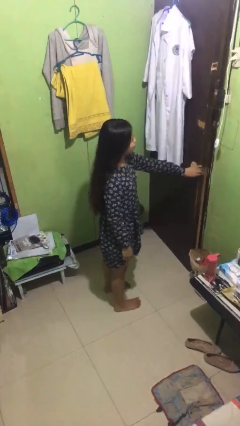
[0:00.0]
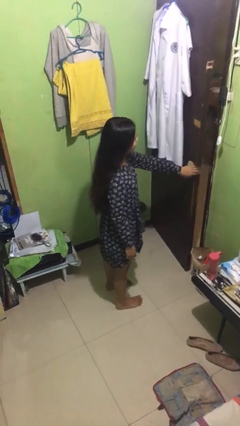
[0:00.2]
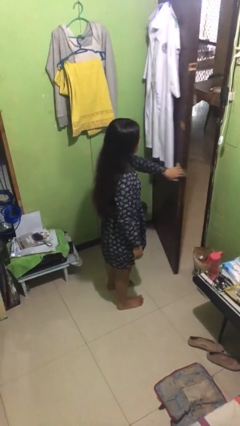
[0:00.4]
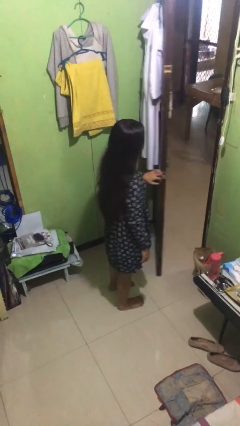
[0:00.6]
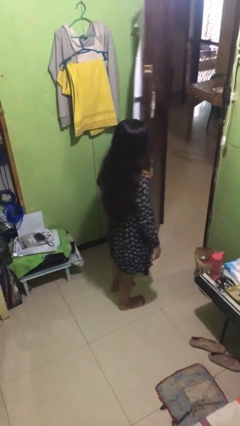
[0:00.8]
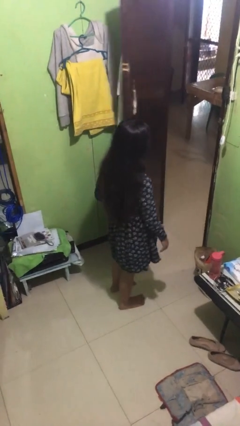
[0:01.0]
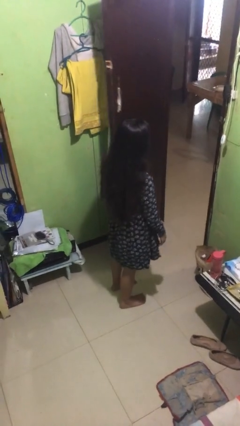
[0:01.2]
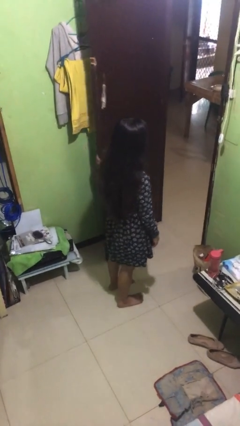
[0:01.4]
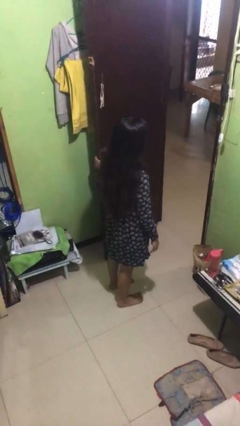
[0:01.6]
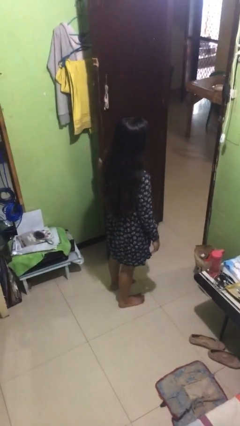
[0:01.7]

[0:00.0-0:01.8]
person opens facility door

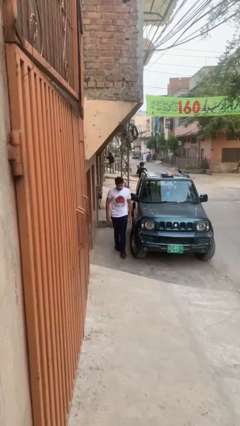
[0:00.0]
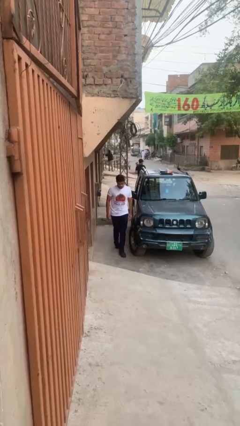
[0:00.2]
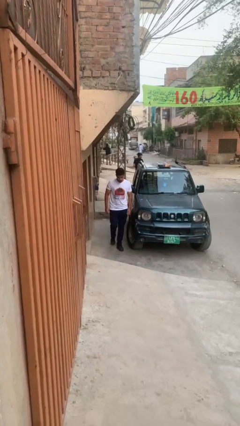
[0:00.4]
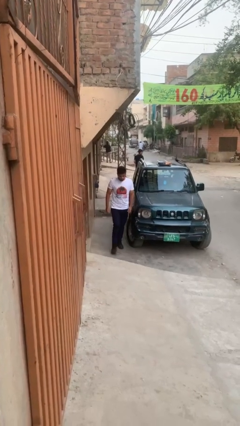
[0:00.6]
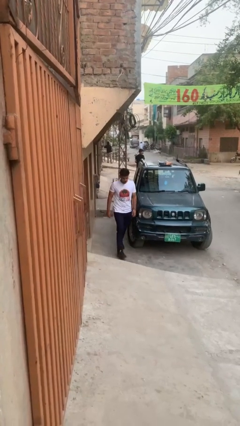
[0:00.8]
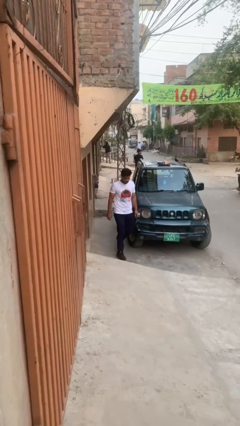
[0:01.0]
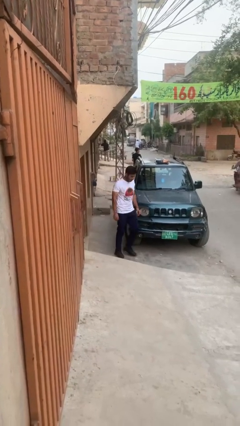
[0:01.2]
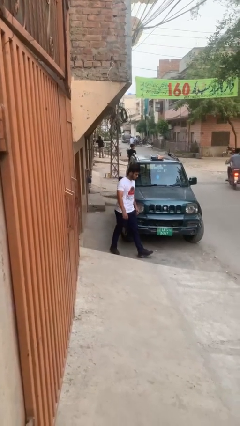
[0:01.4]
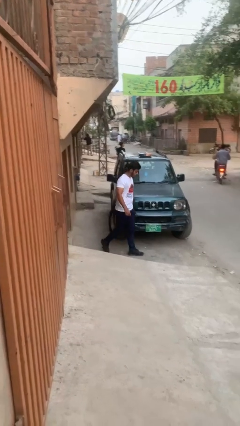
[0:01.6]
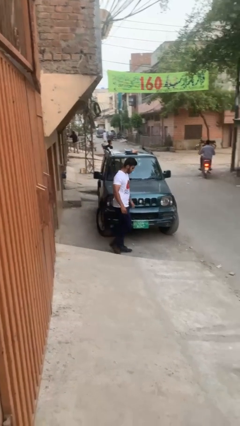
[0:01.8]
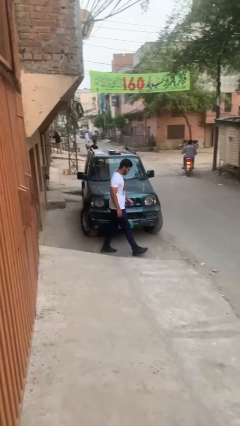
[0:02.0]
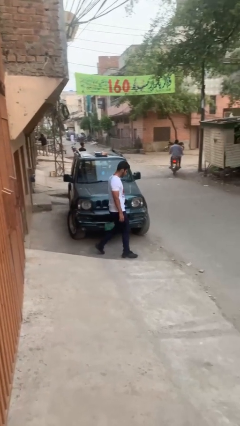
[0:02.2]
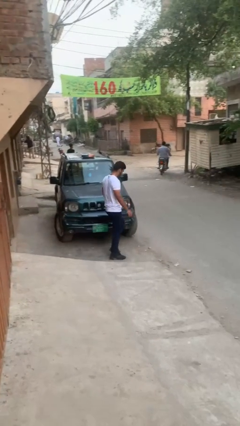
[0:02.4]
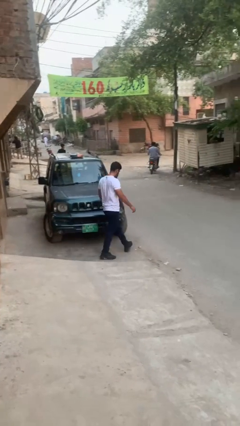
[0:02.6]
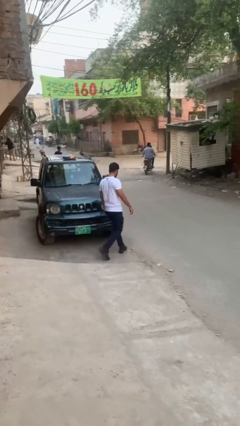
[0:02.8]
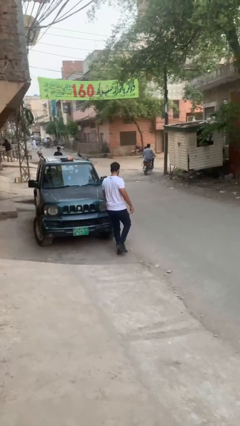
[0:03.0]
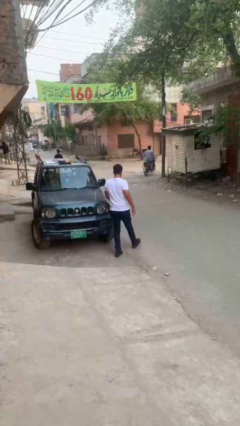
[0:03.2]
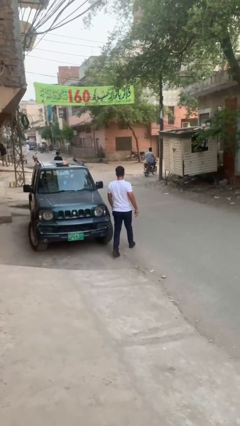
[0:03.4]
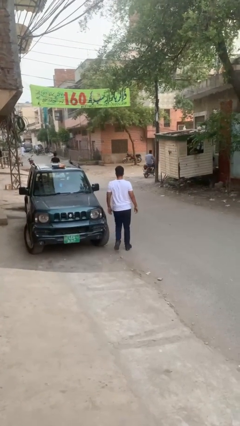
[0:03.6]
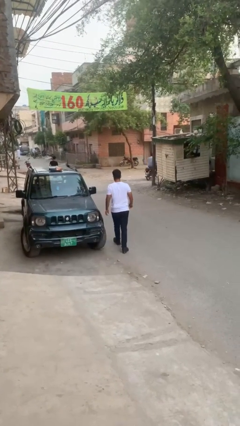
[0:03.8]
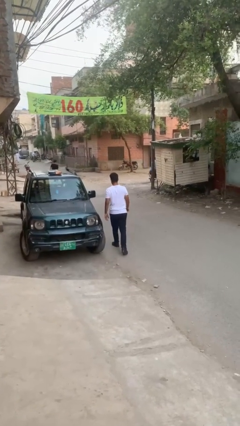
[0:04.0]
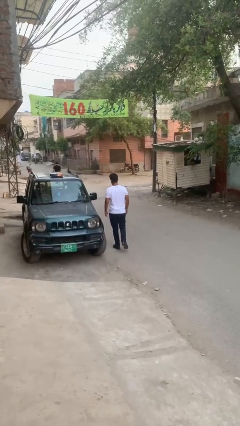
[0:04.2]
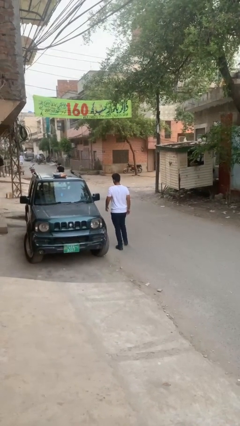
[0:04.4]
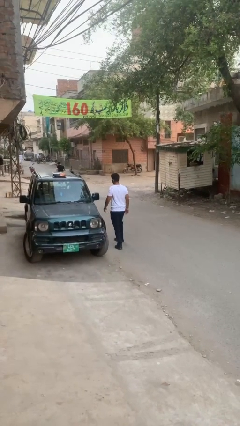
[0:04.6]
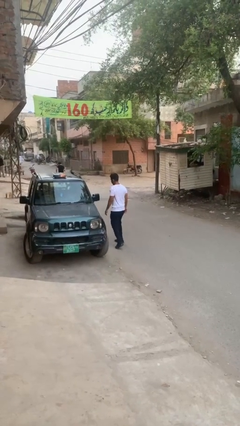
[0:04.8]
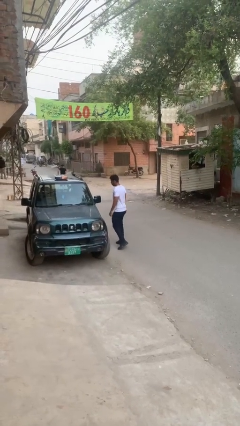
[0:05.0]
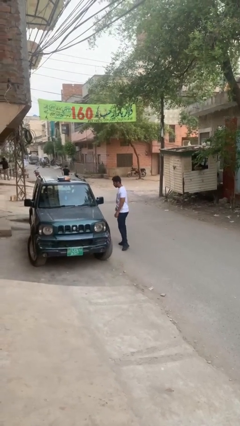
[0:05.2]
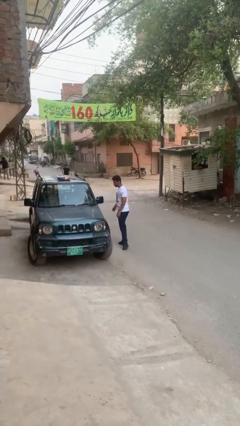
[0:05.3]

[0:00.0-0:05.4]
person walks around car

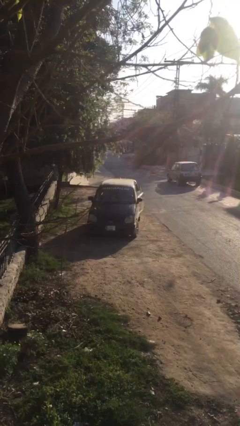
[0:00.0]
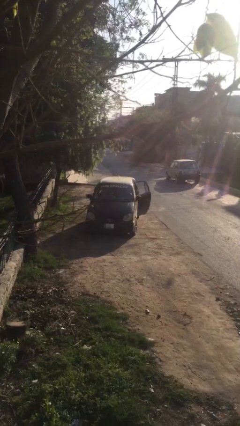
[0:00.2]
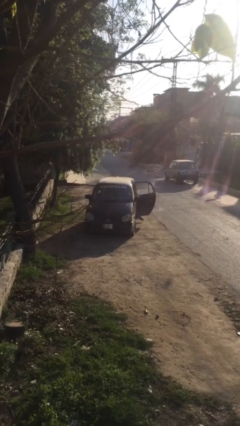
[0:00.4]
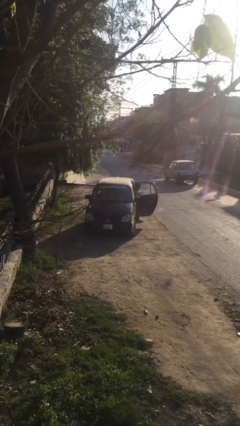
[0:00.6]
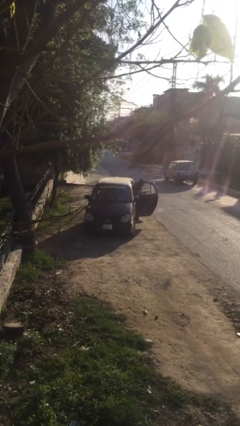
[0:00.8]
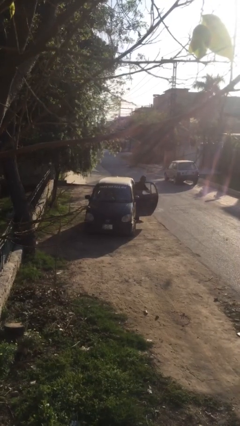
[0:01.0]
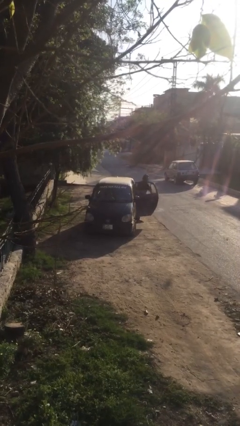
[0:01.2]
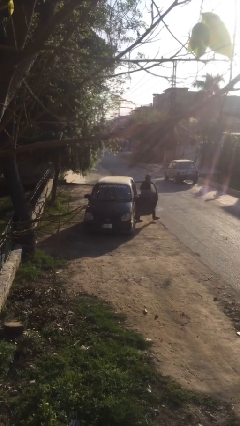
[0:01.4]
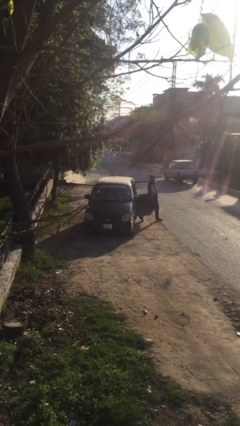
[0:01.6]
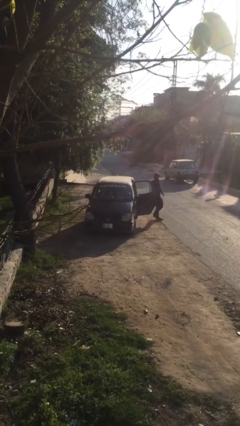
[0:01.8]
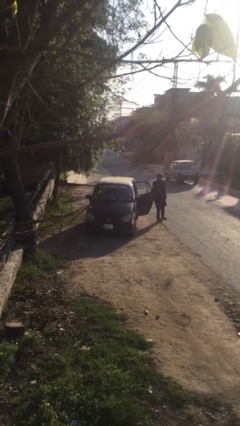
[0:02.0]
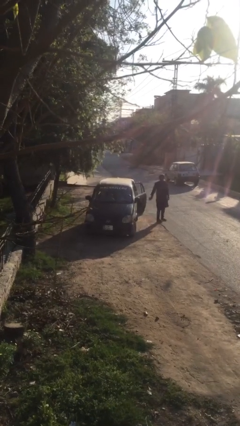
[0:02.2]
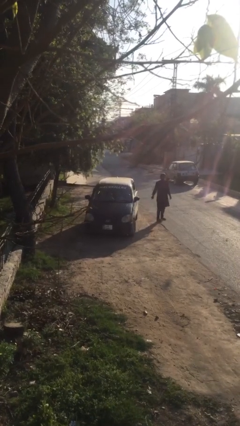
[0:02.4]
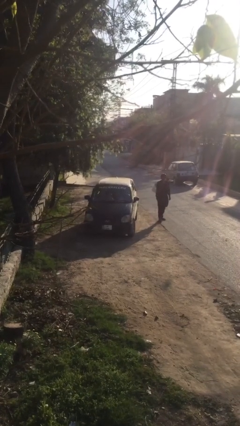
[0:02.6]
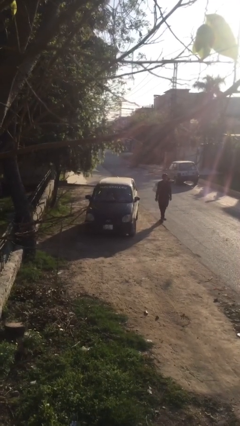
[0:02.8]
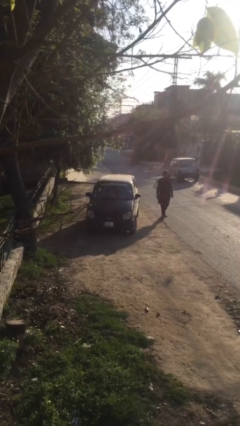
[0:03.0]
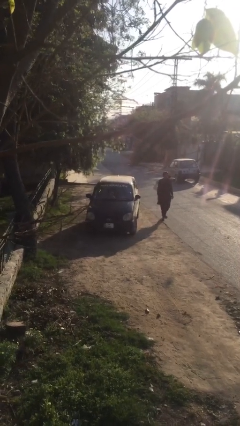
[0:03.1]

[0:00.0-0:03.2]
car drops off person

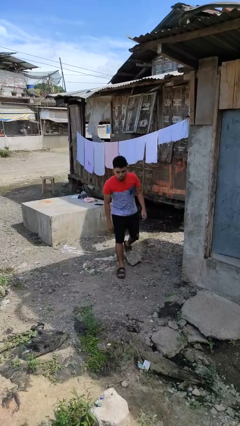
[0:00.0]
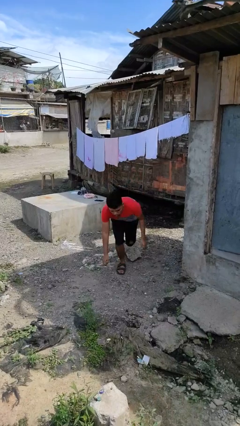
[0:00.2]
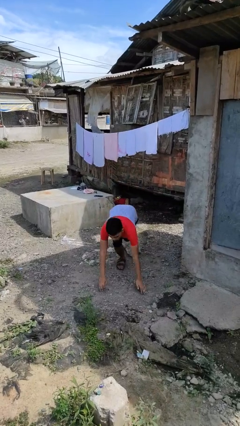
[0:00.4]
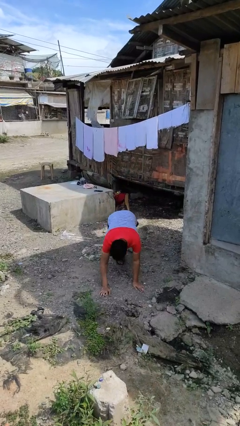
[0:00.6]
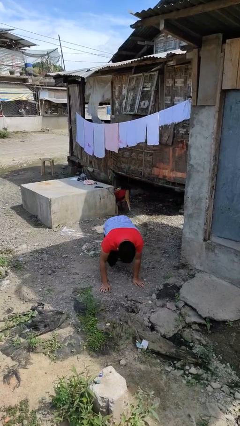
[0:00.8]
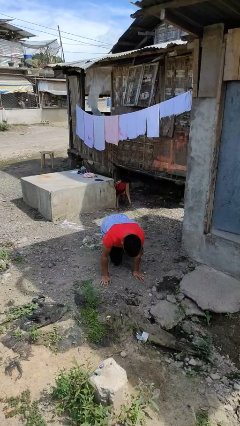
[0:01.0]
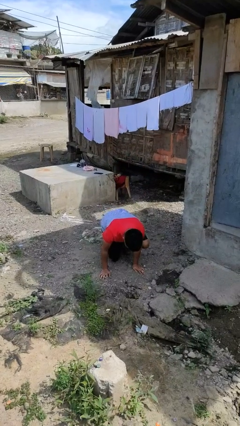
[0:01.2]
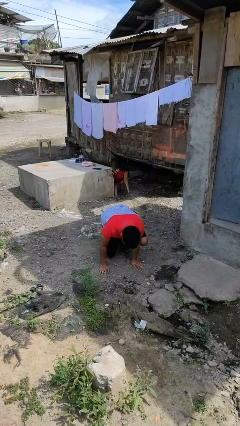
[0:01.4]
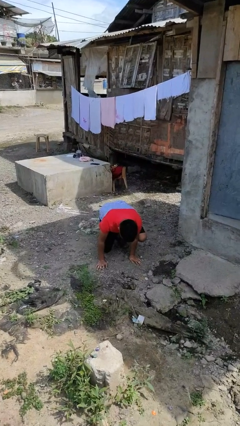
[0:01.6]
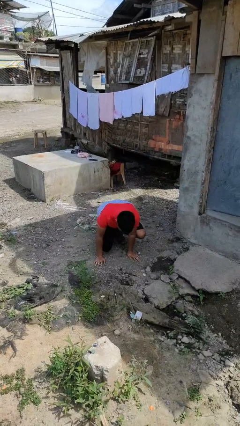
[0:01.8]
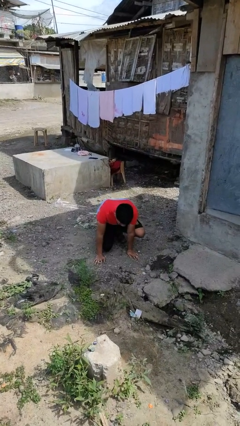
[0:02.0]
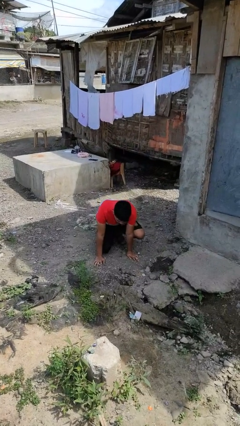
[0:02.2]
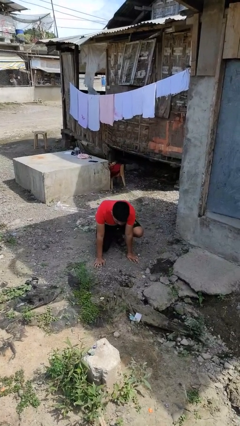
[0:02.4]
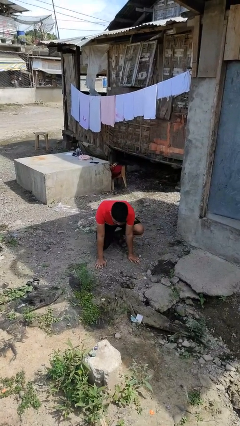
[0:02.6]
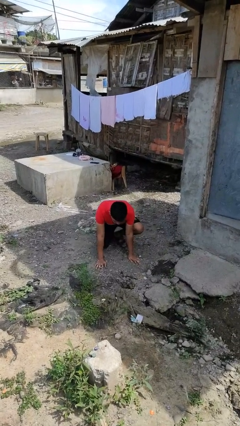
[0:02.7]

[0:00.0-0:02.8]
person trips on object on floor

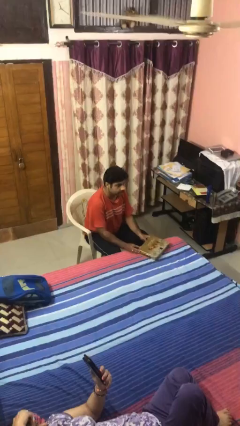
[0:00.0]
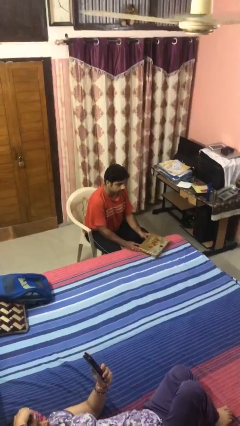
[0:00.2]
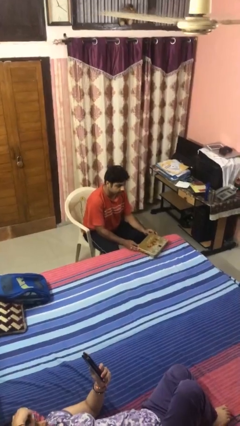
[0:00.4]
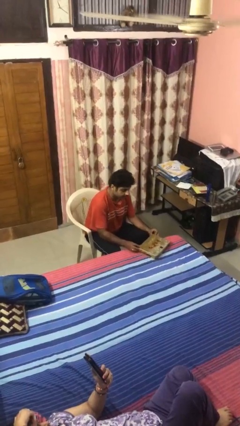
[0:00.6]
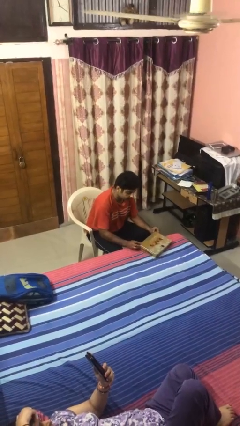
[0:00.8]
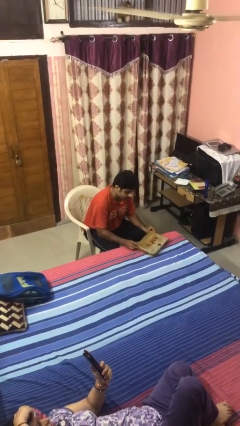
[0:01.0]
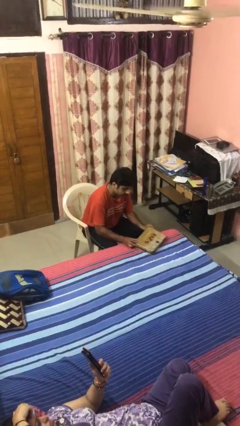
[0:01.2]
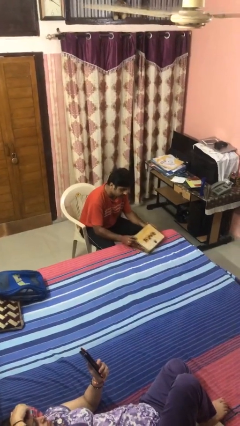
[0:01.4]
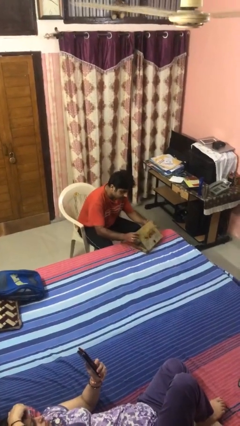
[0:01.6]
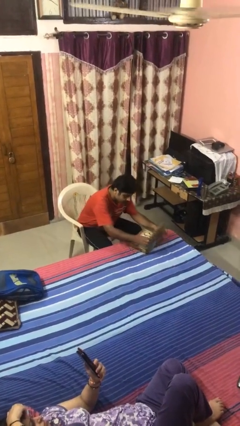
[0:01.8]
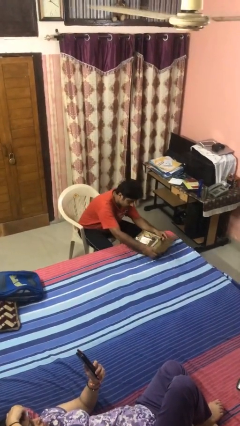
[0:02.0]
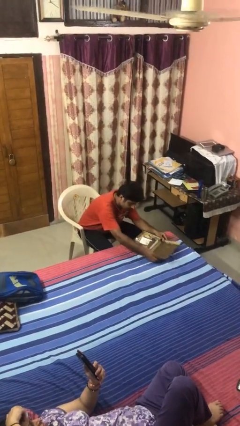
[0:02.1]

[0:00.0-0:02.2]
person opens jewelry box

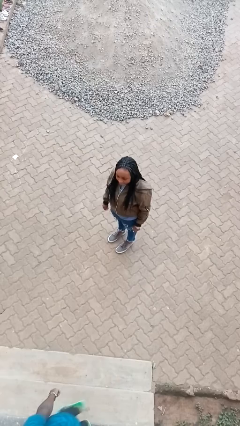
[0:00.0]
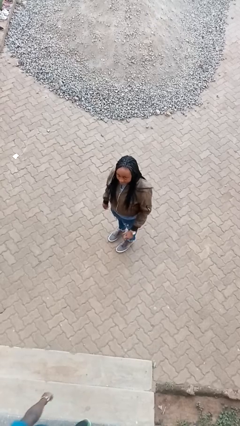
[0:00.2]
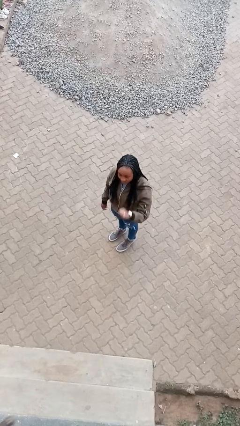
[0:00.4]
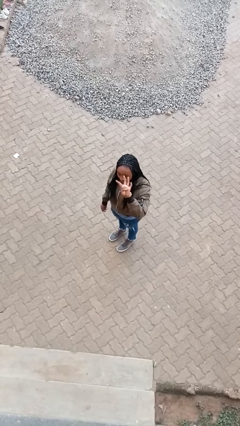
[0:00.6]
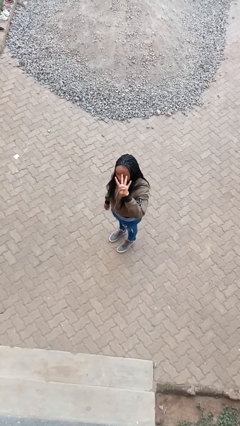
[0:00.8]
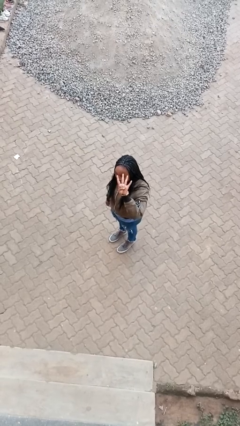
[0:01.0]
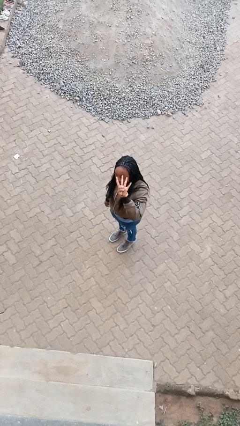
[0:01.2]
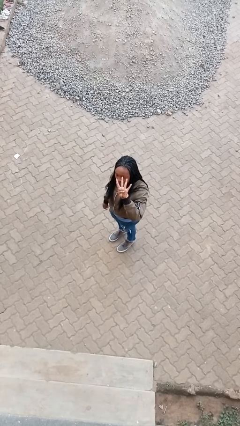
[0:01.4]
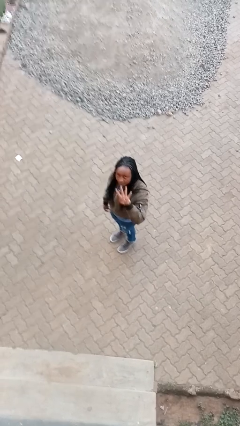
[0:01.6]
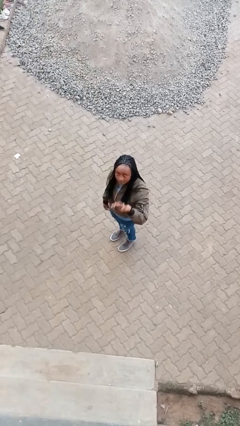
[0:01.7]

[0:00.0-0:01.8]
person gestures number four

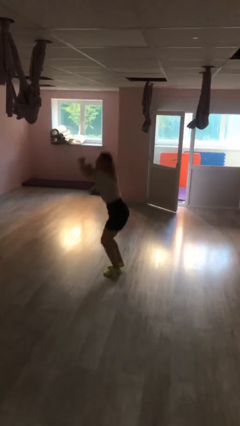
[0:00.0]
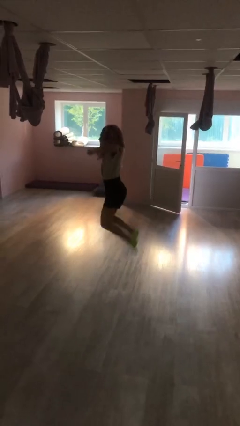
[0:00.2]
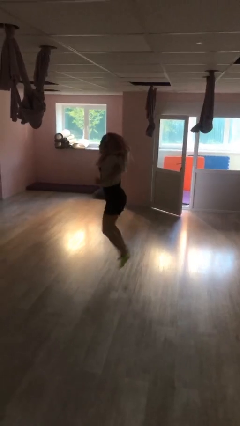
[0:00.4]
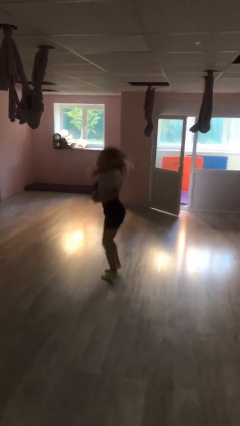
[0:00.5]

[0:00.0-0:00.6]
person jumps
